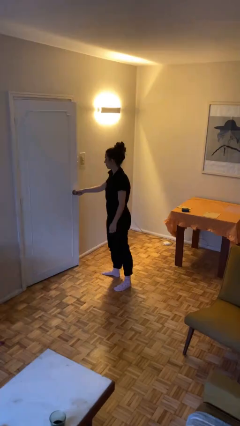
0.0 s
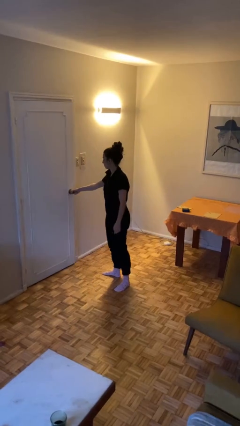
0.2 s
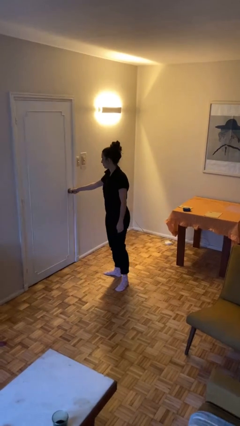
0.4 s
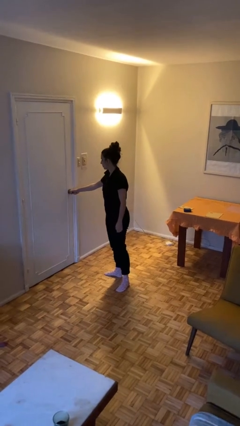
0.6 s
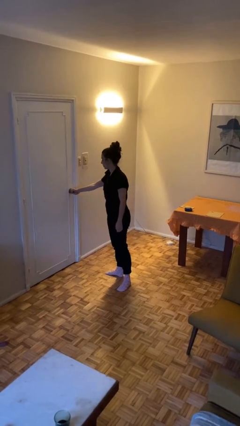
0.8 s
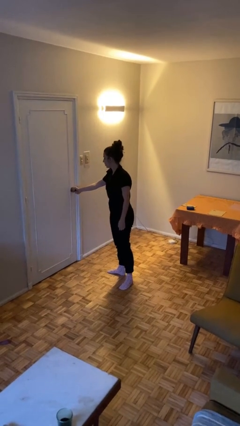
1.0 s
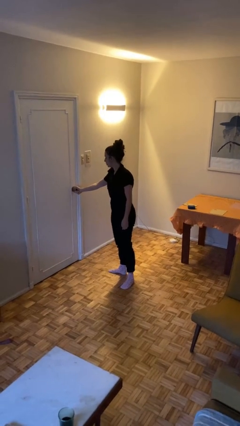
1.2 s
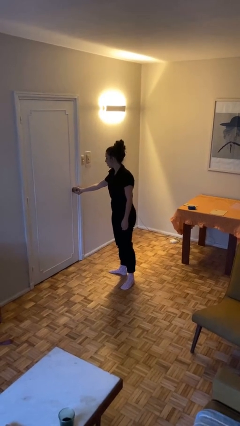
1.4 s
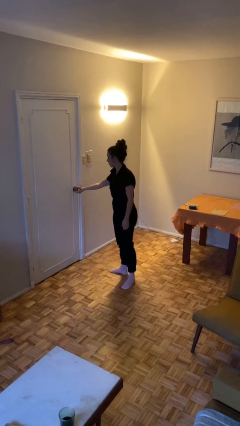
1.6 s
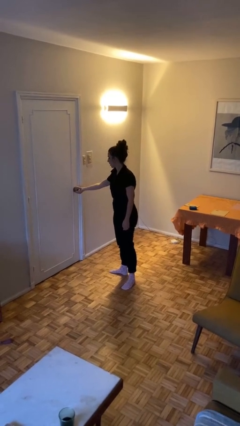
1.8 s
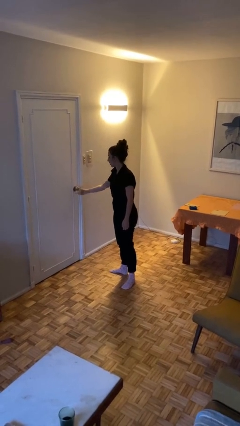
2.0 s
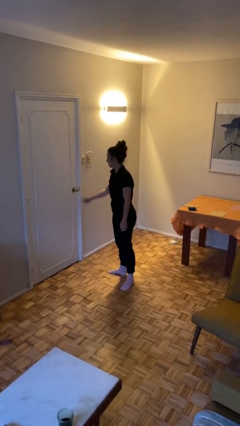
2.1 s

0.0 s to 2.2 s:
person closes facility door

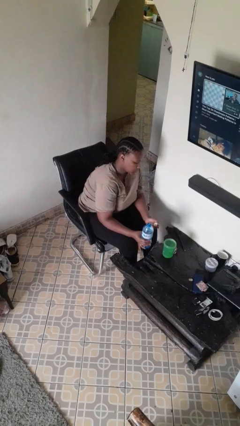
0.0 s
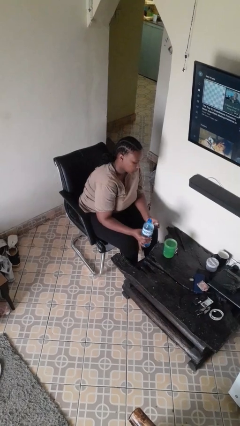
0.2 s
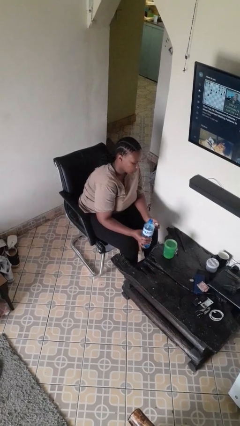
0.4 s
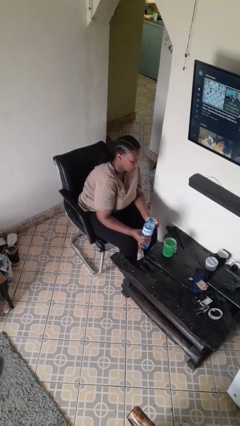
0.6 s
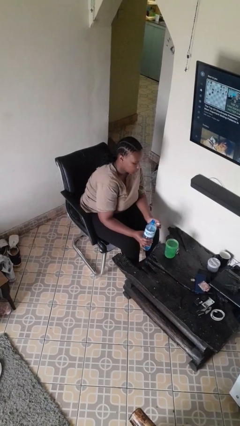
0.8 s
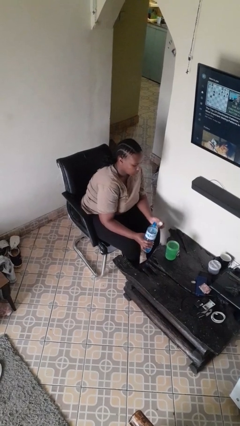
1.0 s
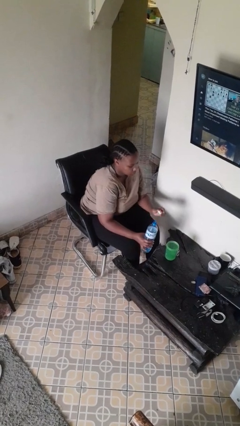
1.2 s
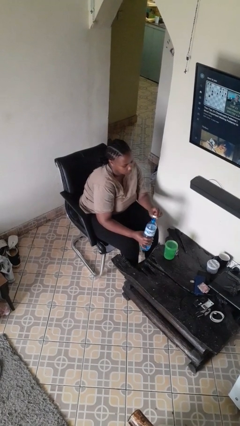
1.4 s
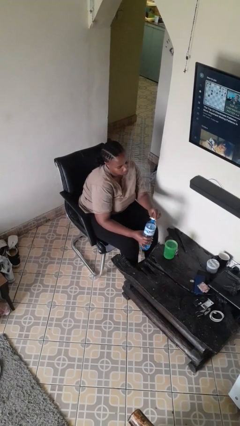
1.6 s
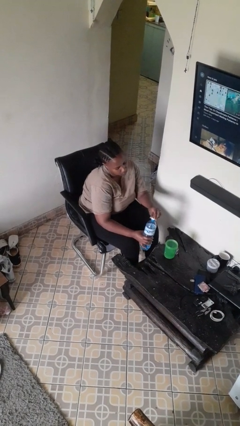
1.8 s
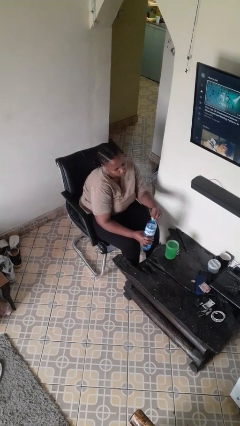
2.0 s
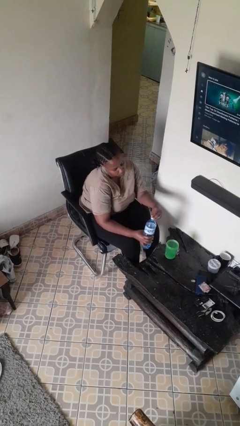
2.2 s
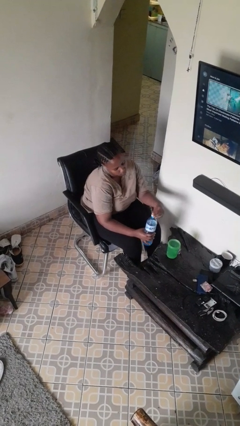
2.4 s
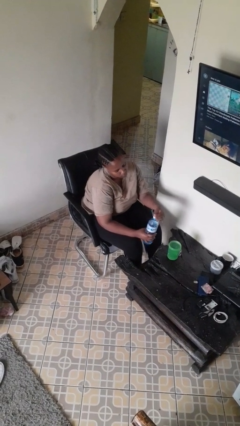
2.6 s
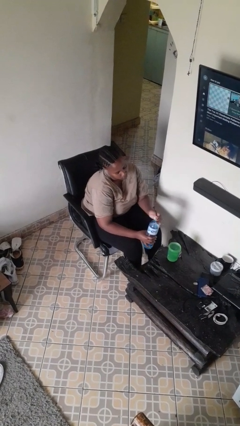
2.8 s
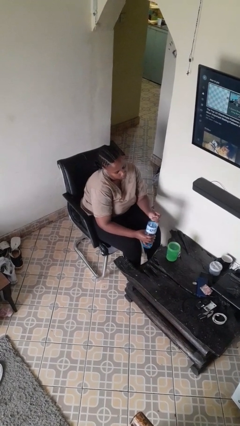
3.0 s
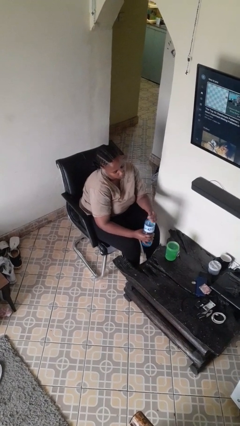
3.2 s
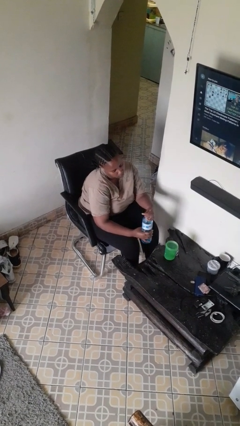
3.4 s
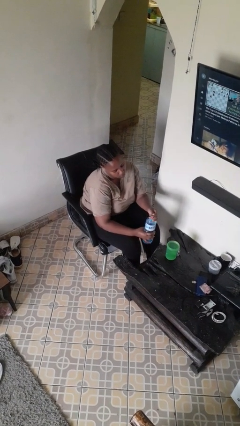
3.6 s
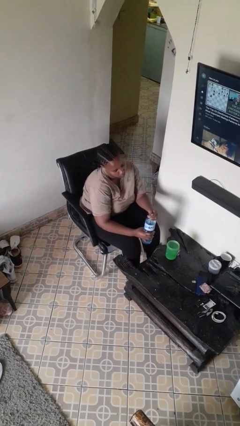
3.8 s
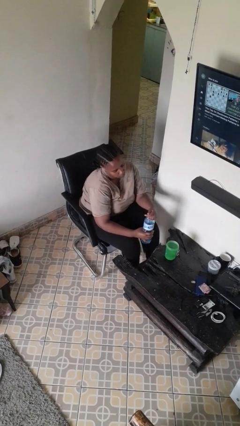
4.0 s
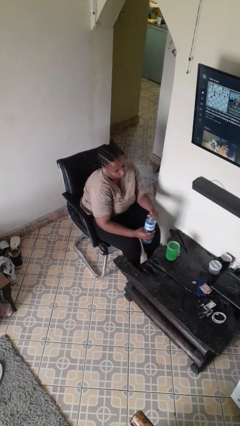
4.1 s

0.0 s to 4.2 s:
person screws lid to bottle

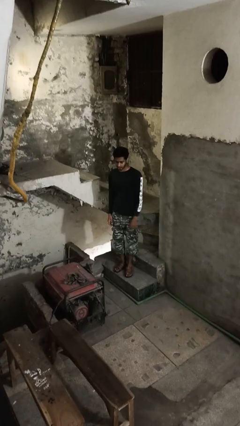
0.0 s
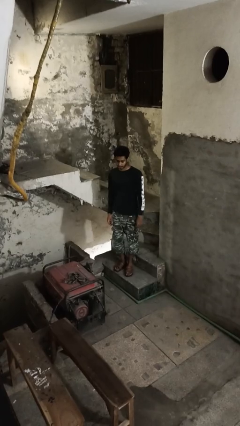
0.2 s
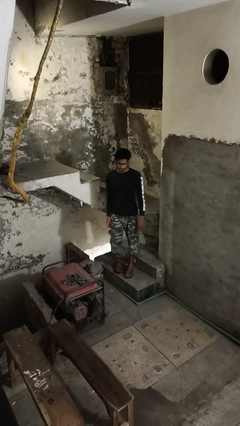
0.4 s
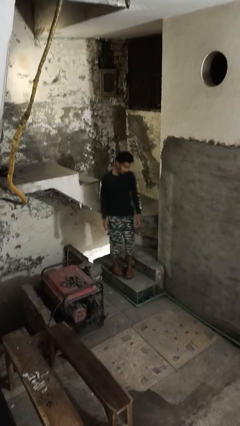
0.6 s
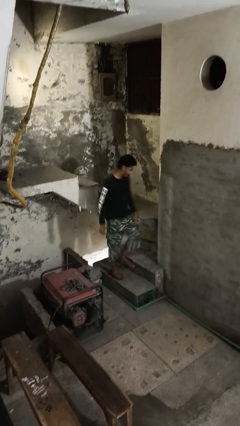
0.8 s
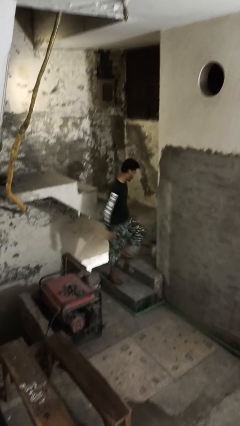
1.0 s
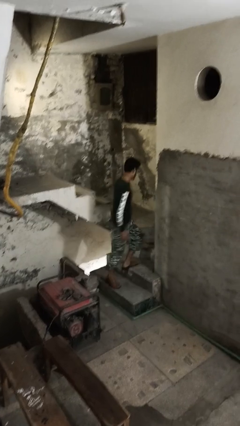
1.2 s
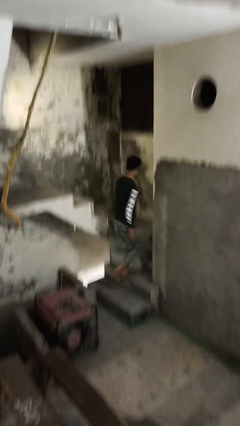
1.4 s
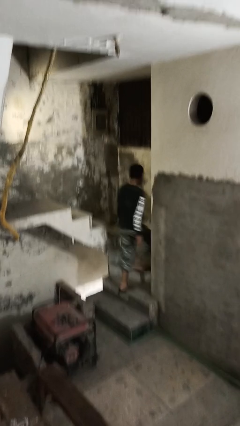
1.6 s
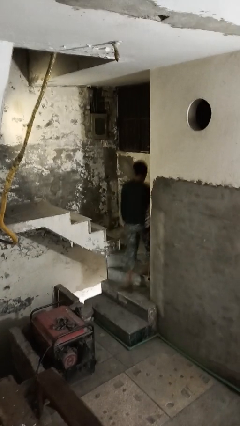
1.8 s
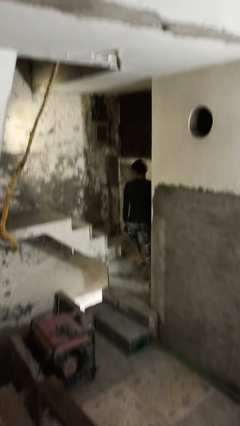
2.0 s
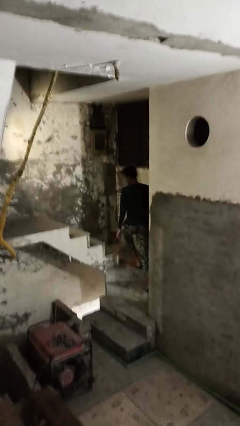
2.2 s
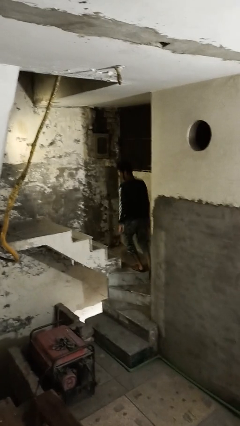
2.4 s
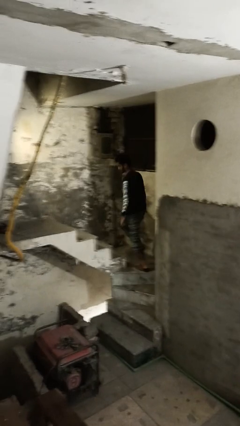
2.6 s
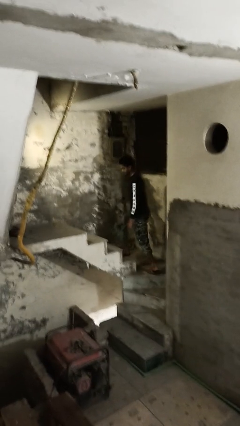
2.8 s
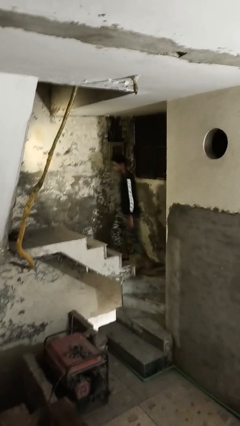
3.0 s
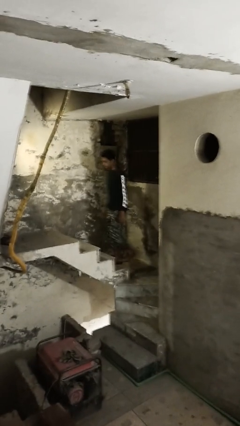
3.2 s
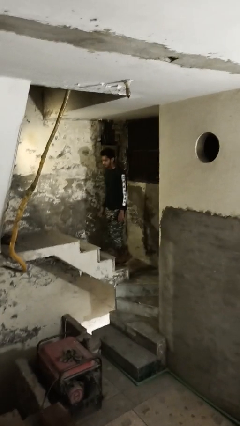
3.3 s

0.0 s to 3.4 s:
person climbs up stairs

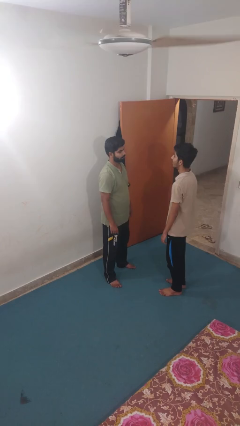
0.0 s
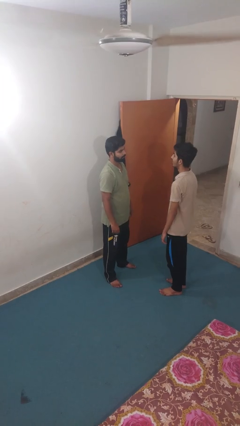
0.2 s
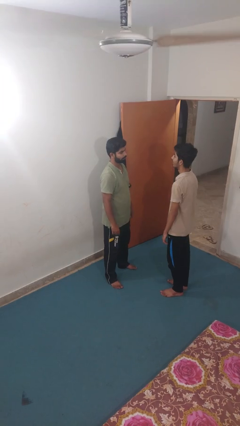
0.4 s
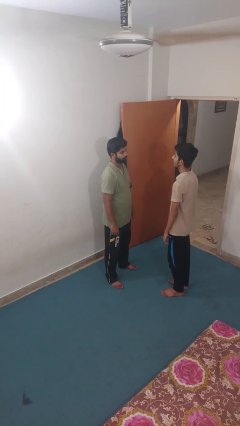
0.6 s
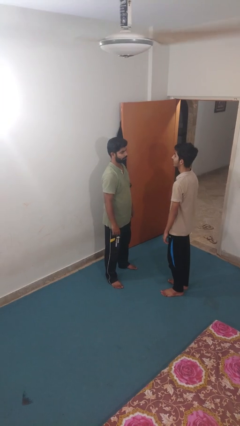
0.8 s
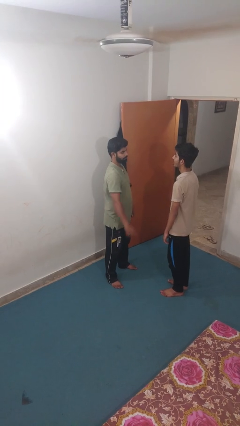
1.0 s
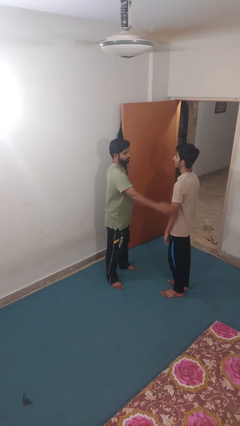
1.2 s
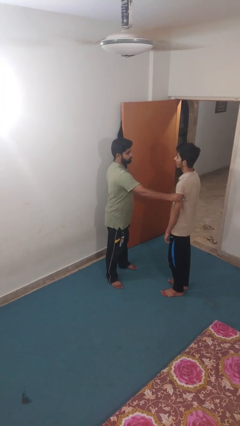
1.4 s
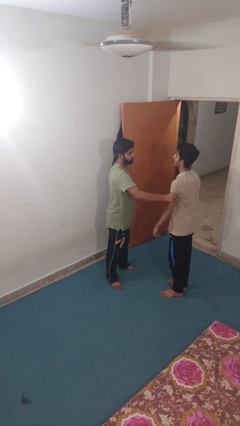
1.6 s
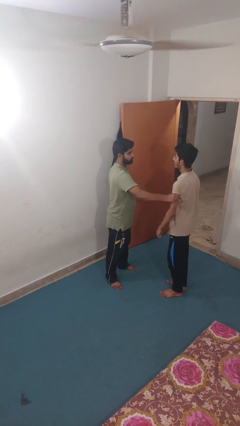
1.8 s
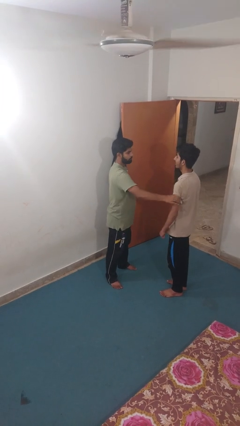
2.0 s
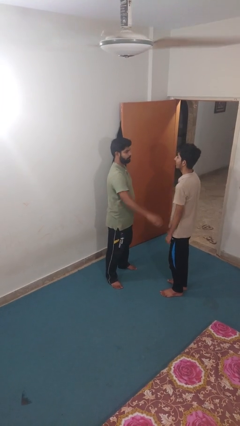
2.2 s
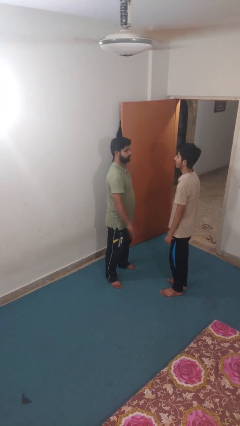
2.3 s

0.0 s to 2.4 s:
person grabs person by bicep

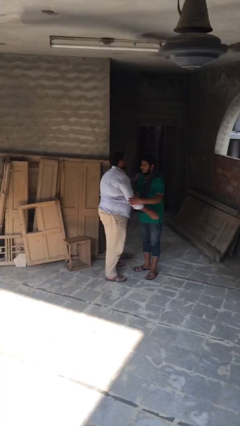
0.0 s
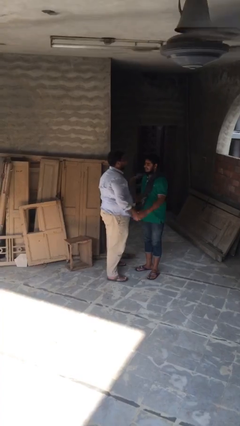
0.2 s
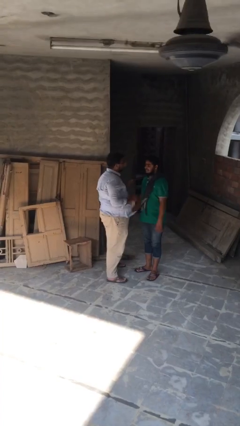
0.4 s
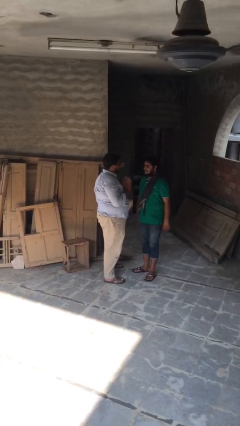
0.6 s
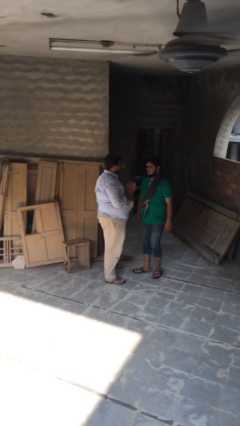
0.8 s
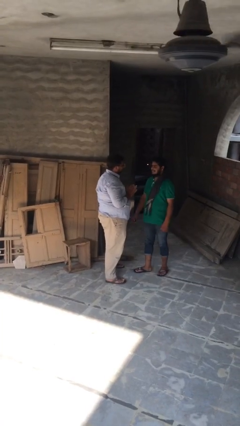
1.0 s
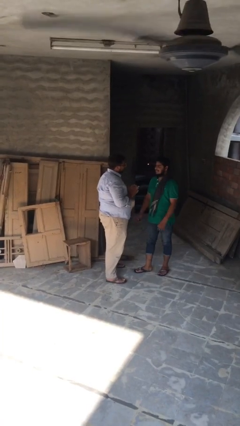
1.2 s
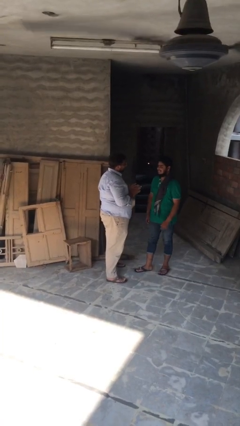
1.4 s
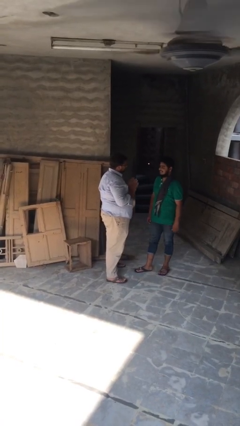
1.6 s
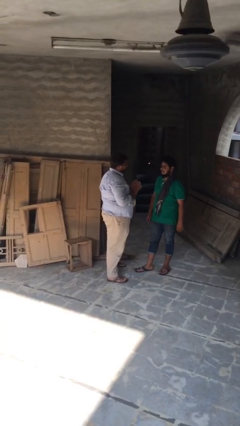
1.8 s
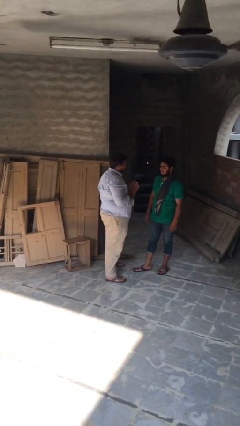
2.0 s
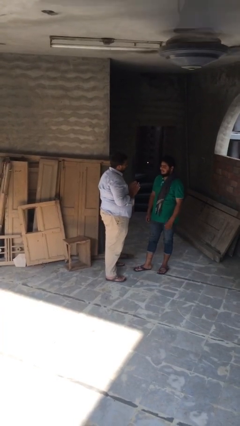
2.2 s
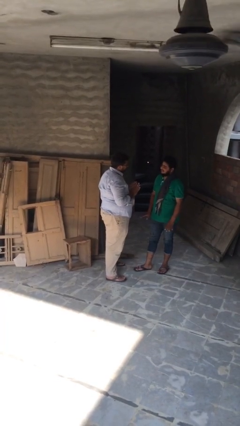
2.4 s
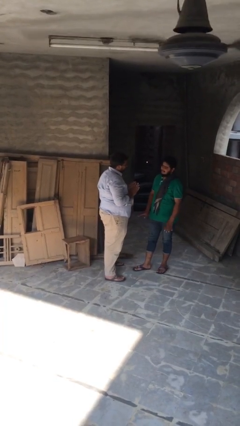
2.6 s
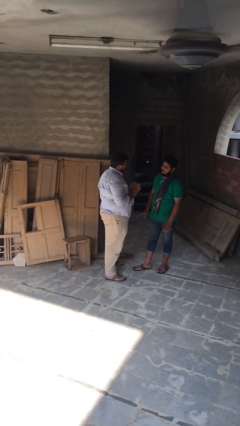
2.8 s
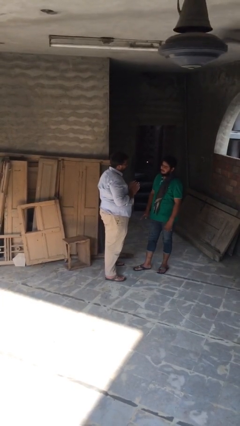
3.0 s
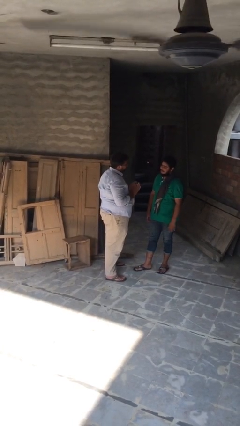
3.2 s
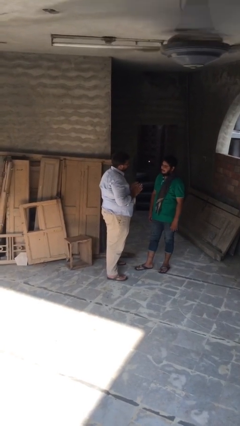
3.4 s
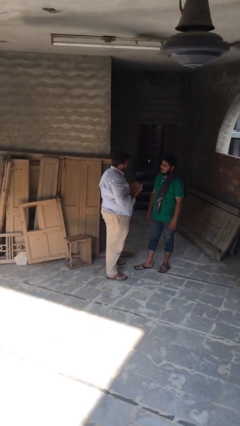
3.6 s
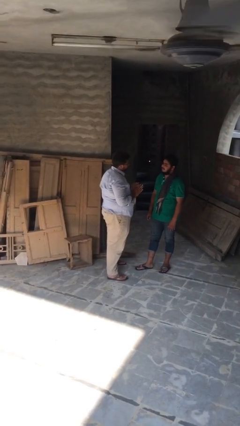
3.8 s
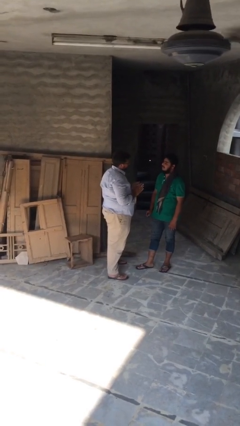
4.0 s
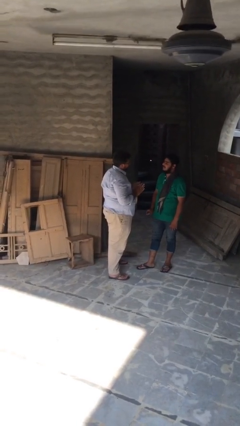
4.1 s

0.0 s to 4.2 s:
person talks to person

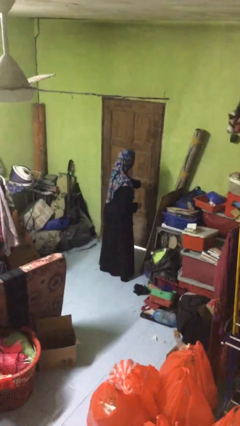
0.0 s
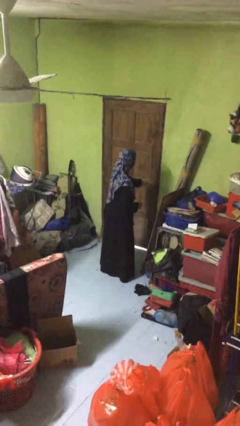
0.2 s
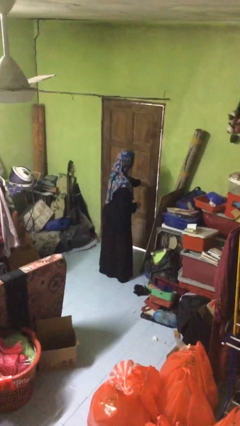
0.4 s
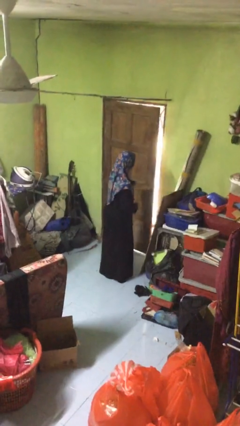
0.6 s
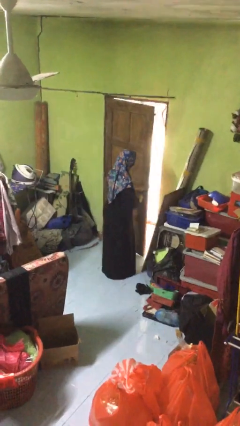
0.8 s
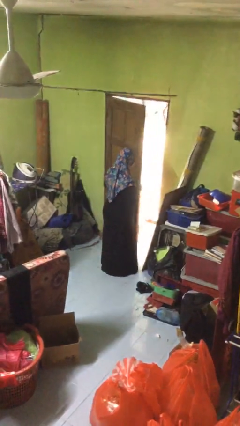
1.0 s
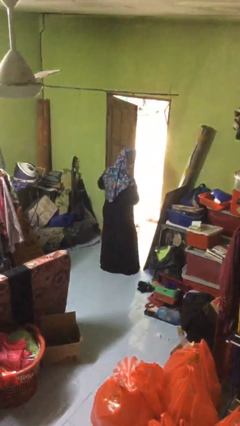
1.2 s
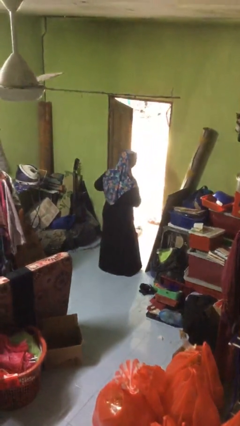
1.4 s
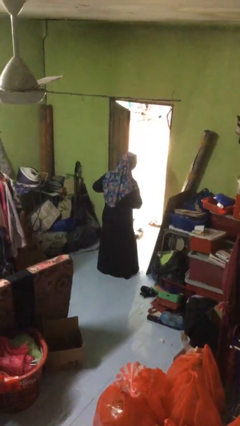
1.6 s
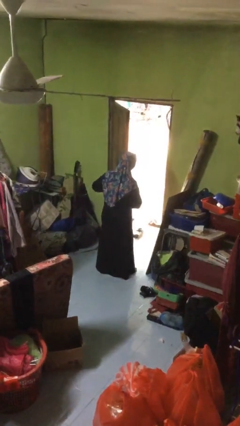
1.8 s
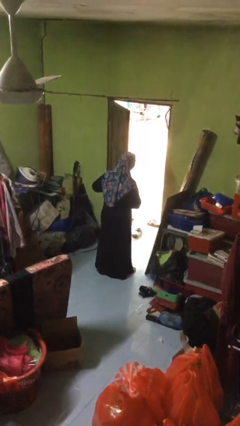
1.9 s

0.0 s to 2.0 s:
person opens facility door
